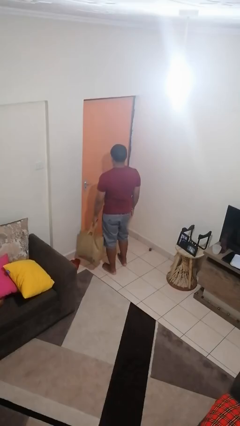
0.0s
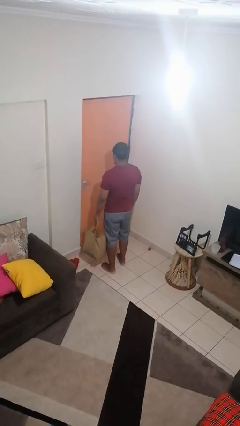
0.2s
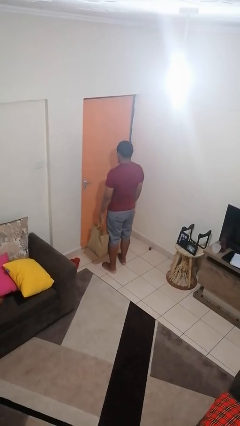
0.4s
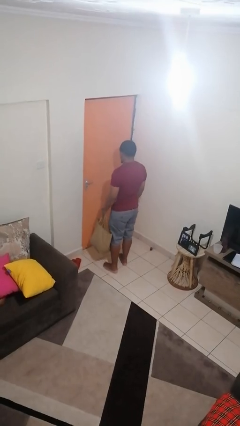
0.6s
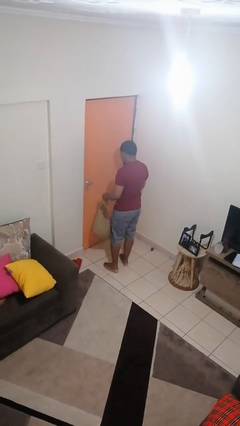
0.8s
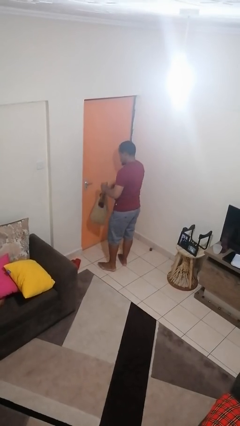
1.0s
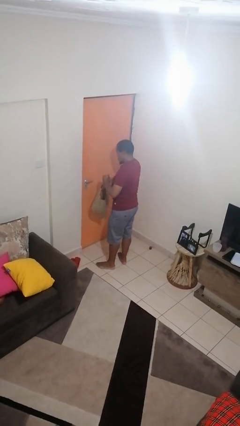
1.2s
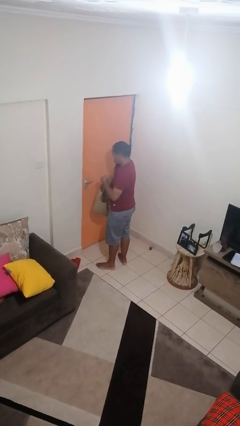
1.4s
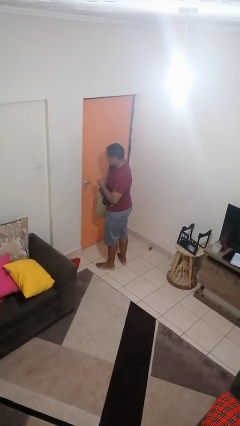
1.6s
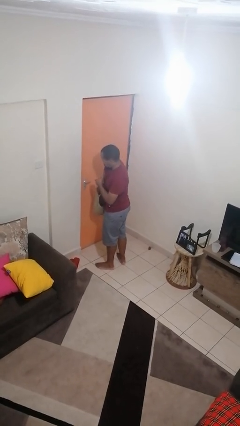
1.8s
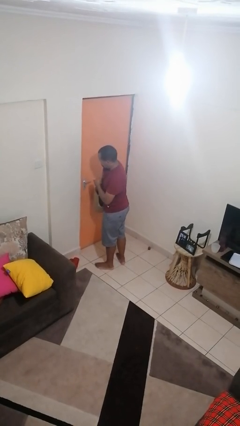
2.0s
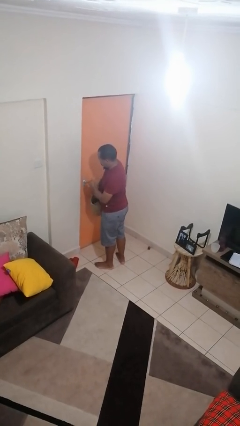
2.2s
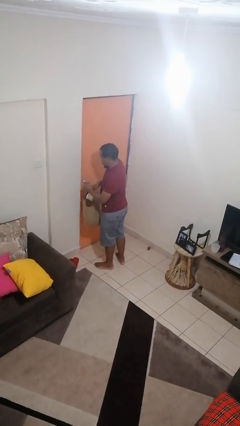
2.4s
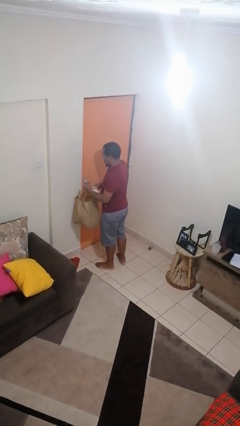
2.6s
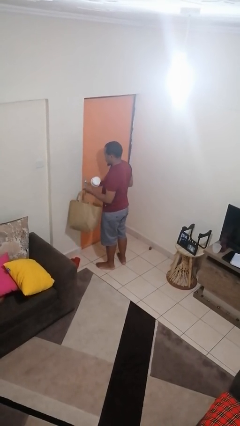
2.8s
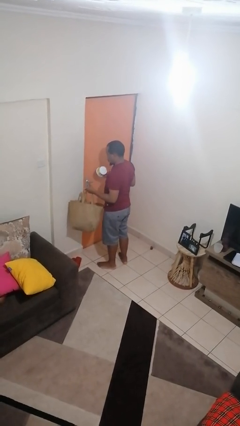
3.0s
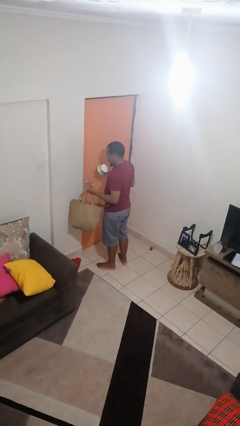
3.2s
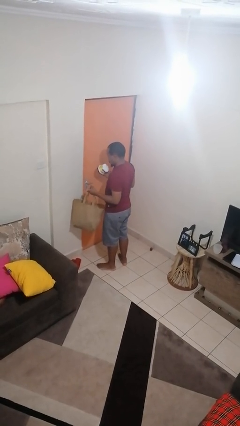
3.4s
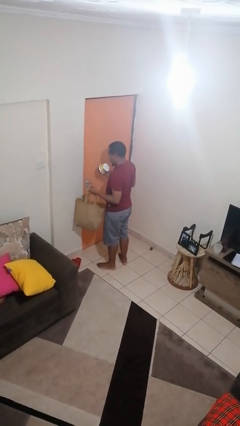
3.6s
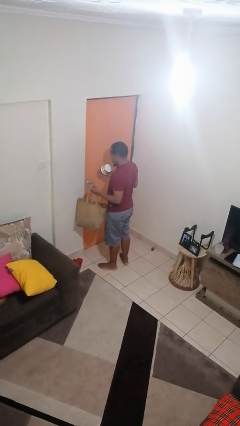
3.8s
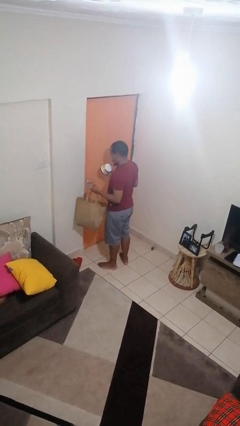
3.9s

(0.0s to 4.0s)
person takes object from bag

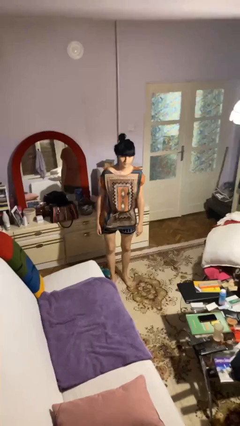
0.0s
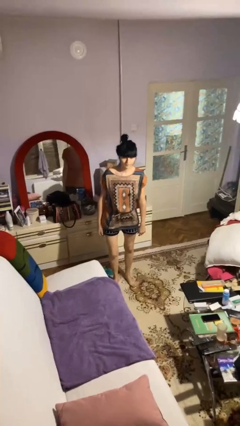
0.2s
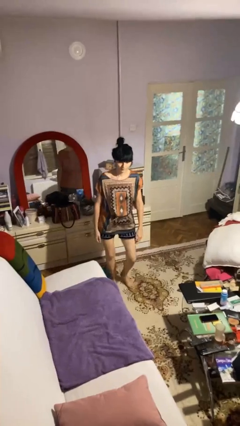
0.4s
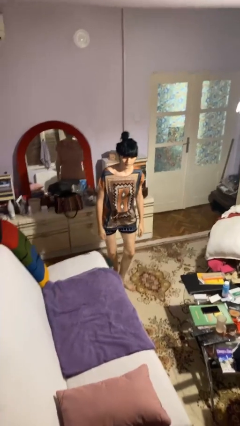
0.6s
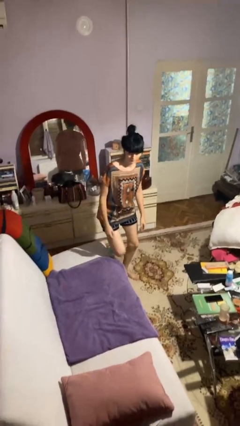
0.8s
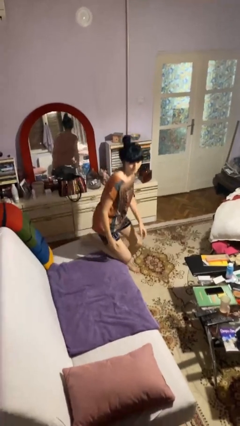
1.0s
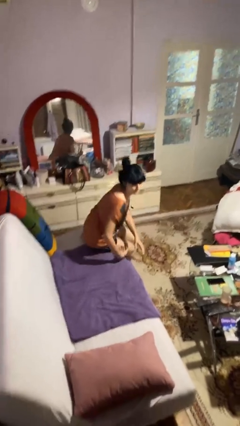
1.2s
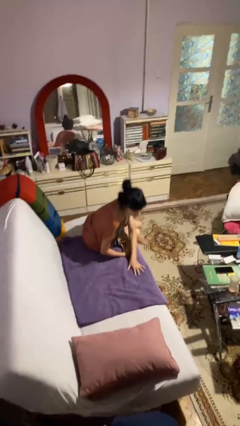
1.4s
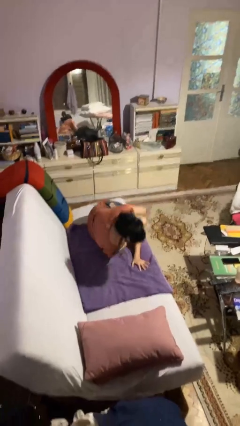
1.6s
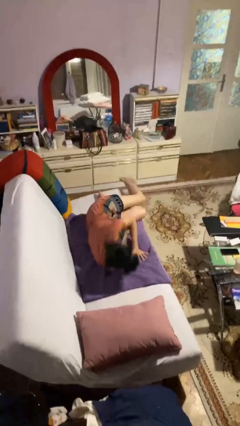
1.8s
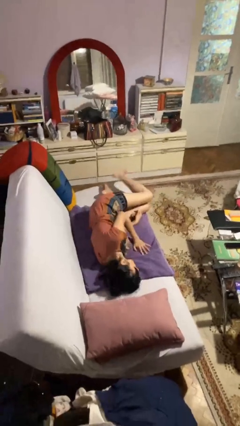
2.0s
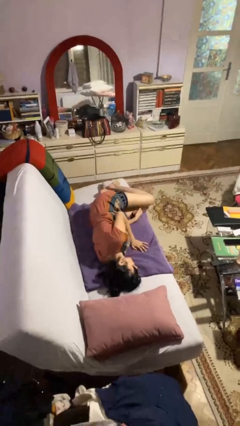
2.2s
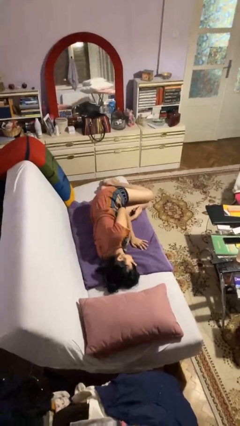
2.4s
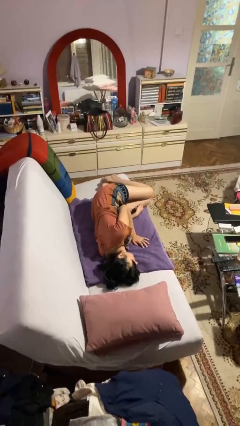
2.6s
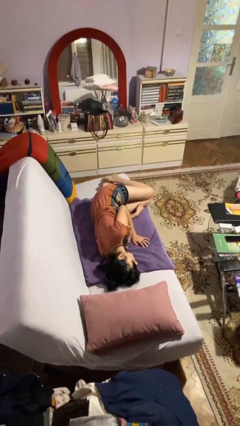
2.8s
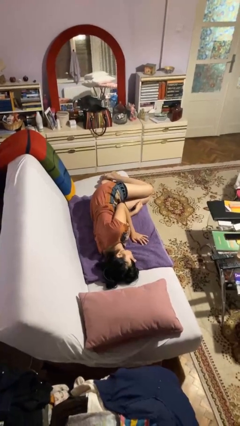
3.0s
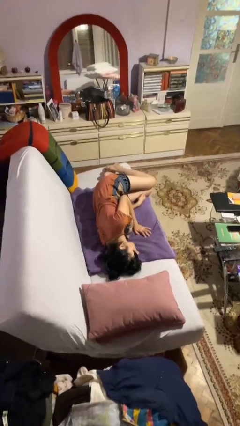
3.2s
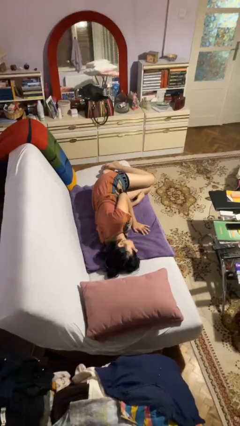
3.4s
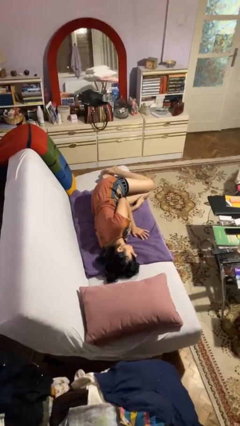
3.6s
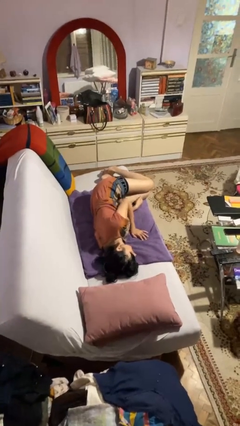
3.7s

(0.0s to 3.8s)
person lies down on couch

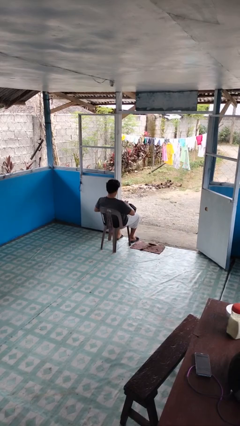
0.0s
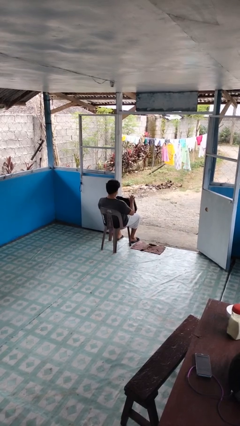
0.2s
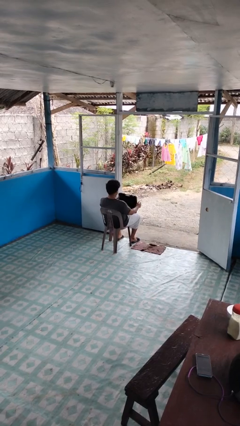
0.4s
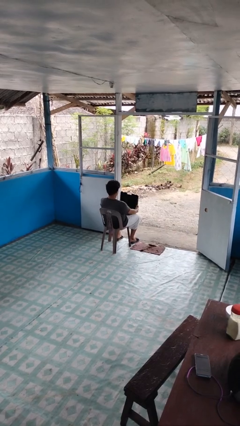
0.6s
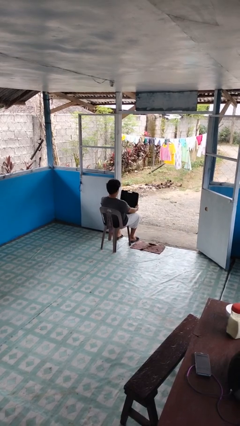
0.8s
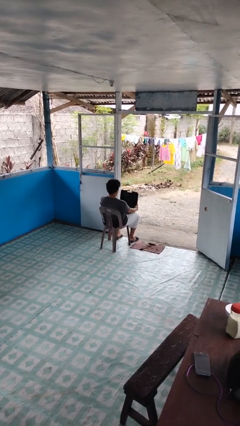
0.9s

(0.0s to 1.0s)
person opens suitcase

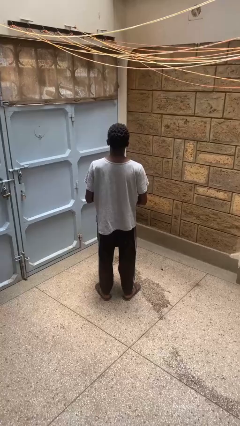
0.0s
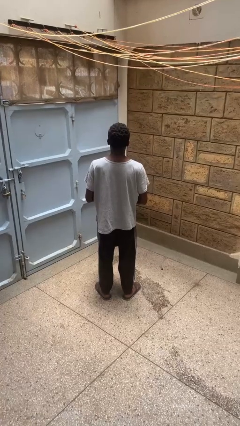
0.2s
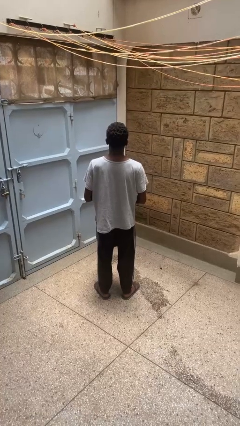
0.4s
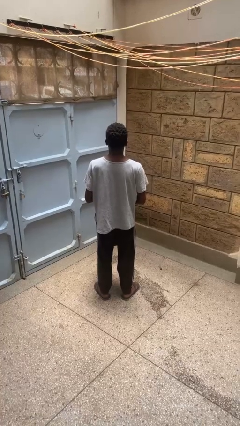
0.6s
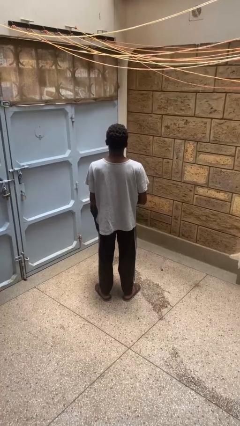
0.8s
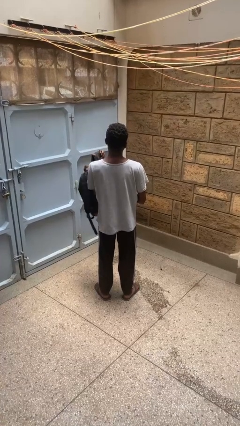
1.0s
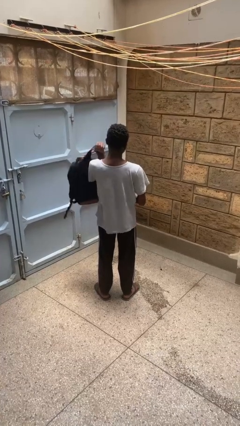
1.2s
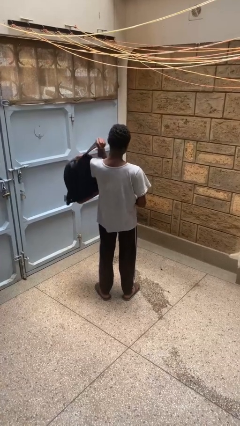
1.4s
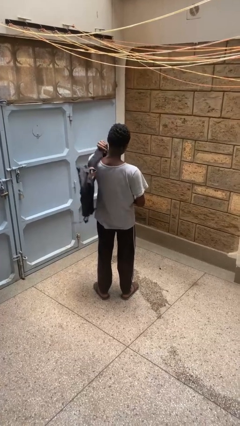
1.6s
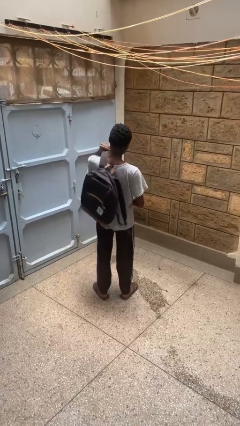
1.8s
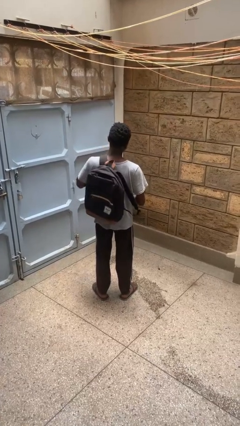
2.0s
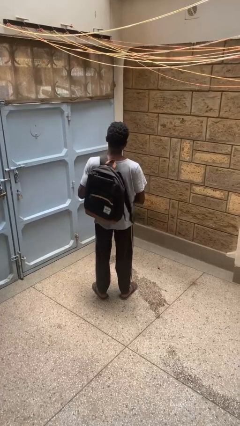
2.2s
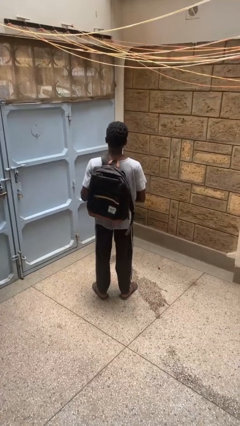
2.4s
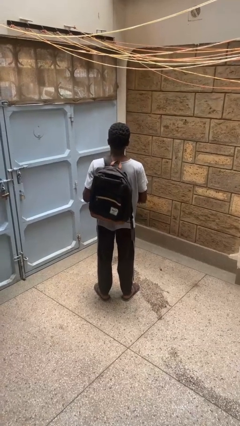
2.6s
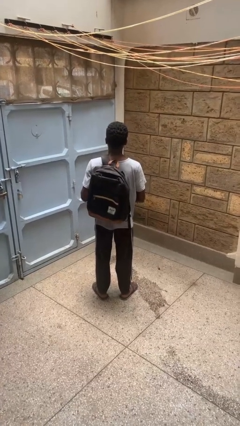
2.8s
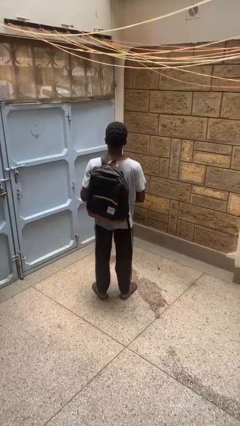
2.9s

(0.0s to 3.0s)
person puts on backpack

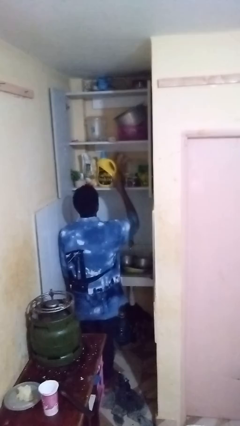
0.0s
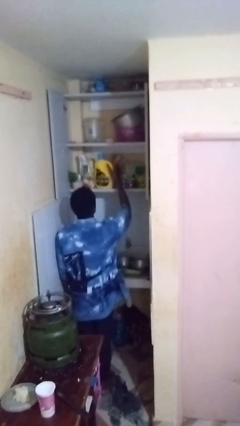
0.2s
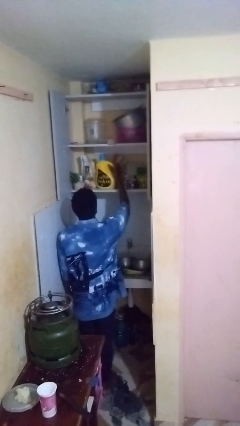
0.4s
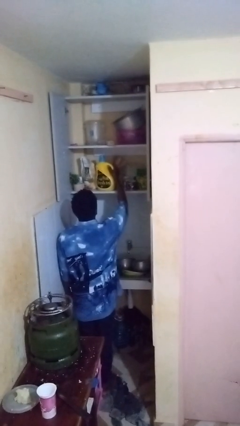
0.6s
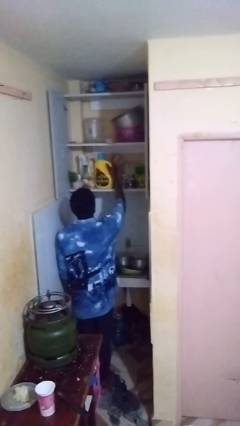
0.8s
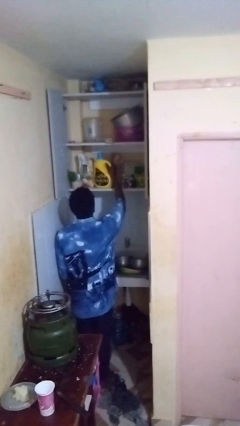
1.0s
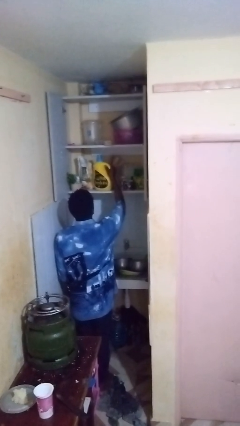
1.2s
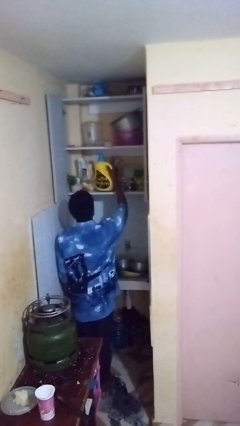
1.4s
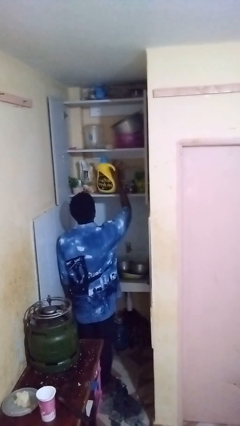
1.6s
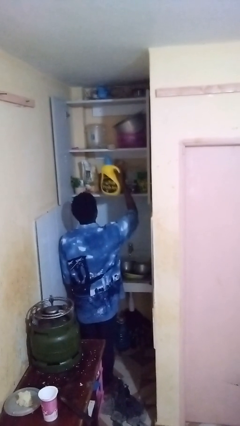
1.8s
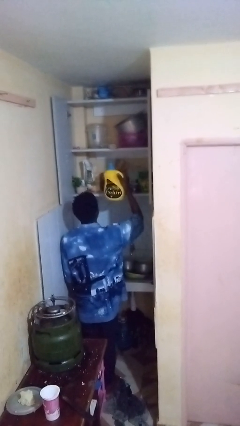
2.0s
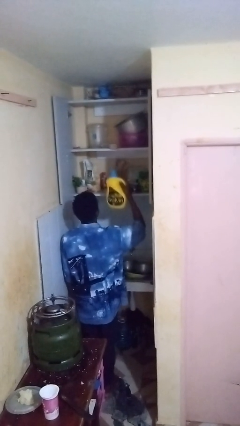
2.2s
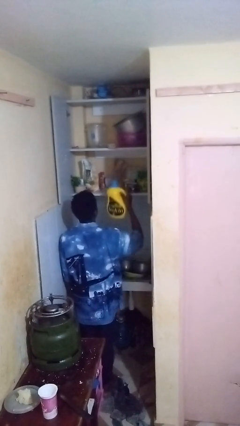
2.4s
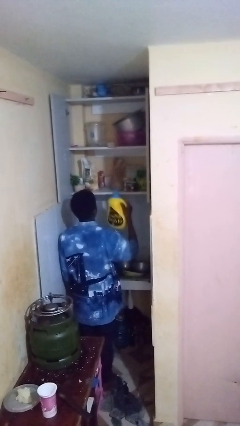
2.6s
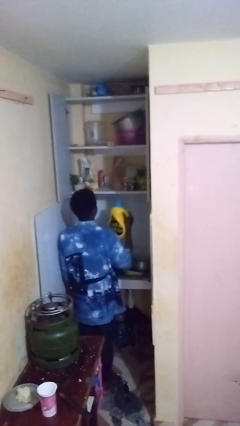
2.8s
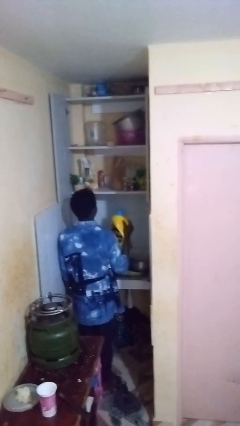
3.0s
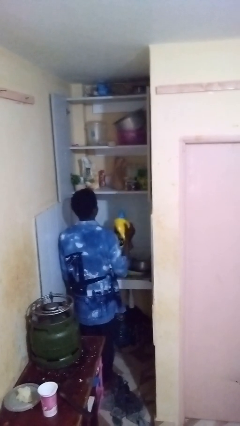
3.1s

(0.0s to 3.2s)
person picks up object from countertop

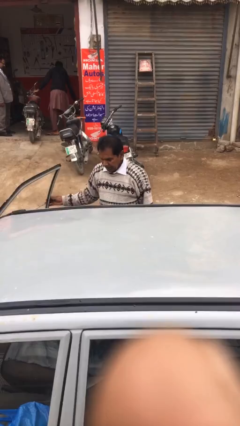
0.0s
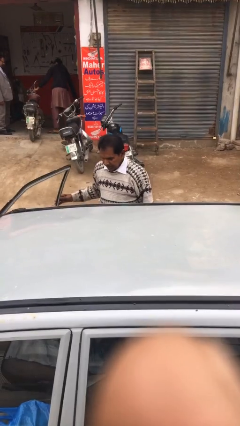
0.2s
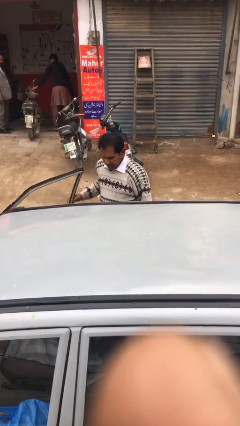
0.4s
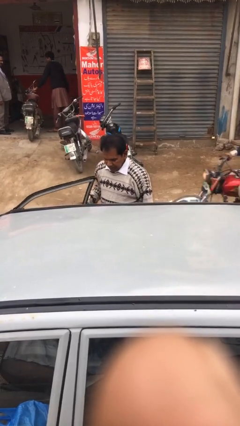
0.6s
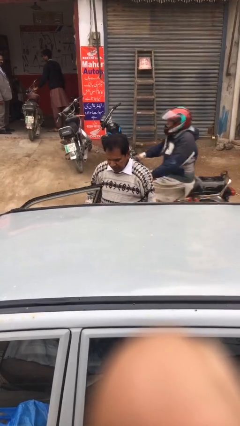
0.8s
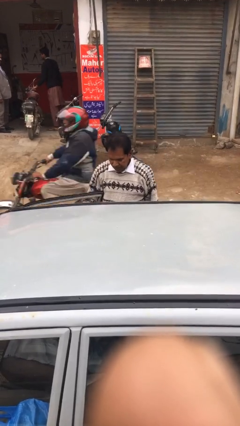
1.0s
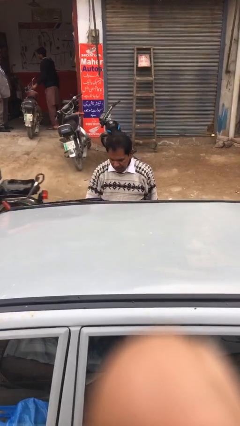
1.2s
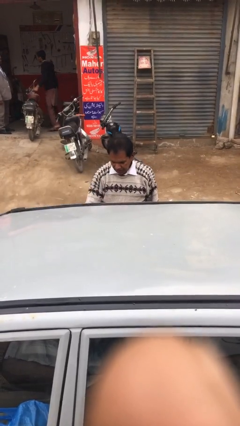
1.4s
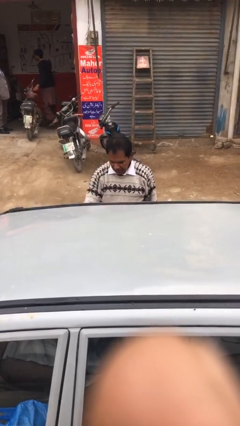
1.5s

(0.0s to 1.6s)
person closes car door

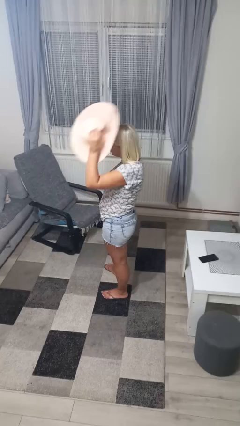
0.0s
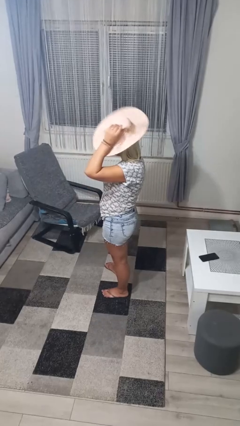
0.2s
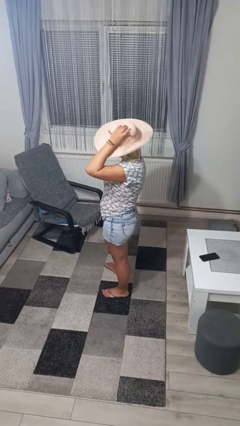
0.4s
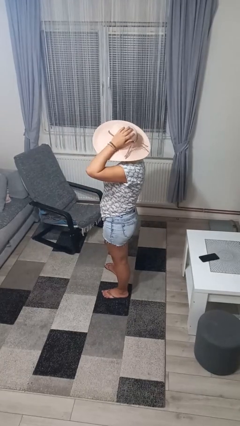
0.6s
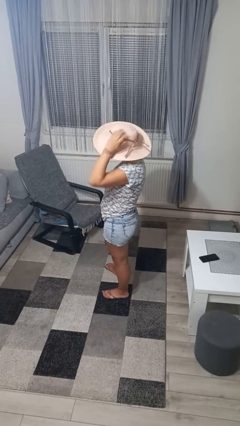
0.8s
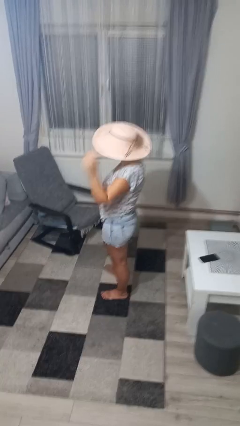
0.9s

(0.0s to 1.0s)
person puts on hat
